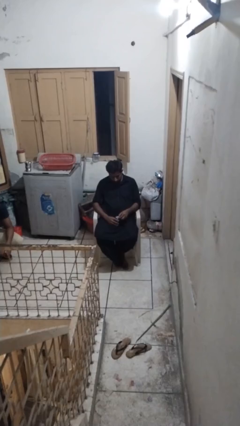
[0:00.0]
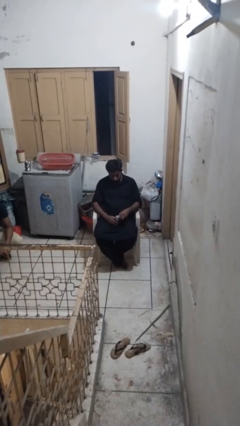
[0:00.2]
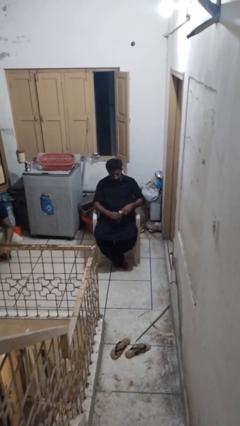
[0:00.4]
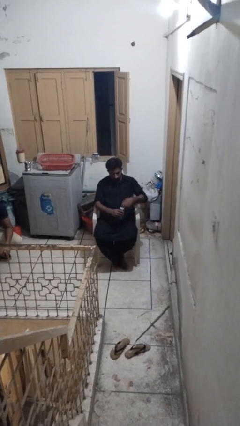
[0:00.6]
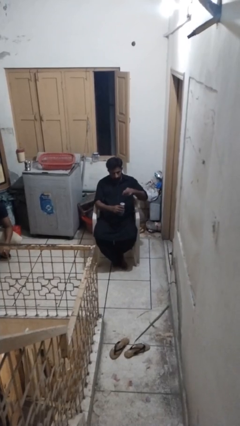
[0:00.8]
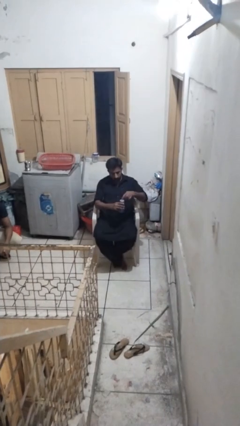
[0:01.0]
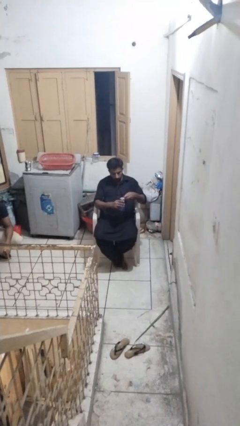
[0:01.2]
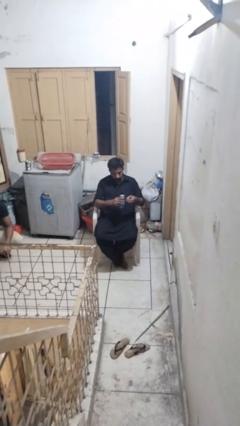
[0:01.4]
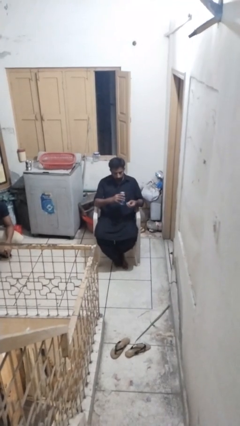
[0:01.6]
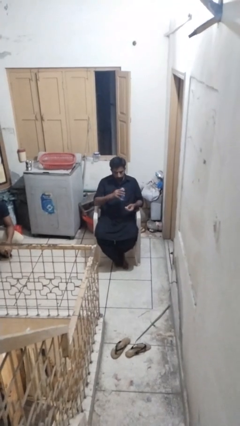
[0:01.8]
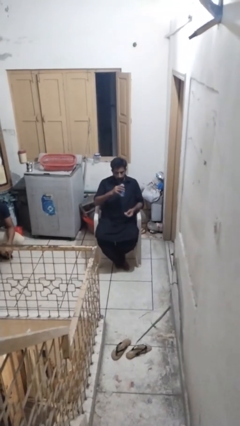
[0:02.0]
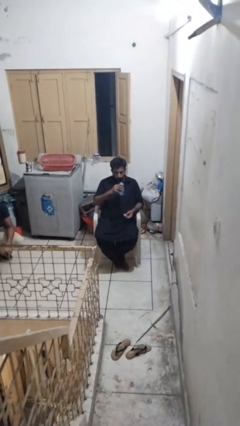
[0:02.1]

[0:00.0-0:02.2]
person opens beverage can

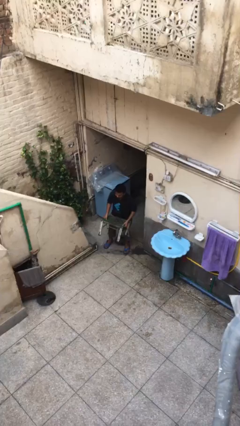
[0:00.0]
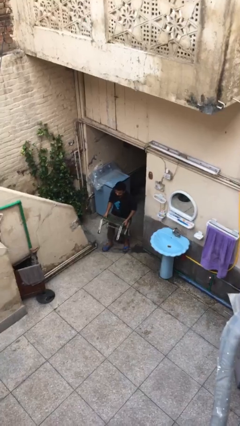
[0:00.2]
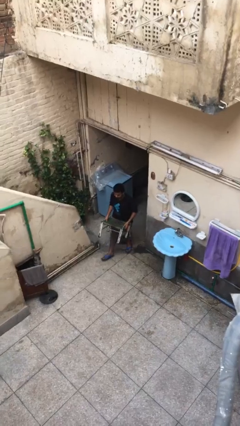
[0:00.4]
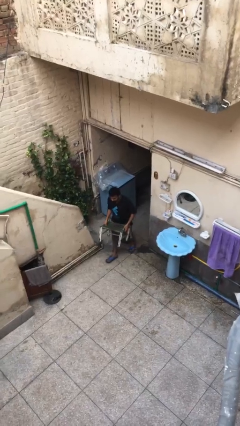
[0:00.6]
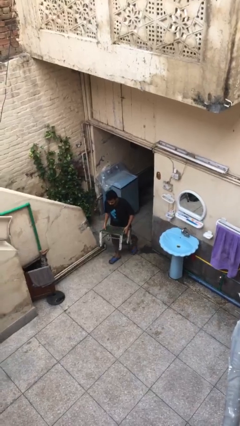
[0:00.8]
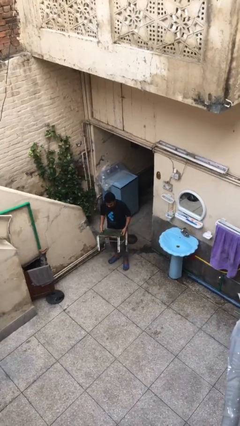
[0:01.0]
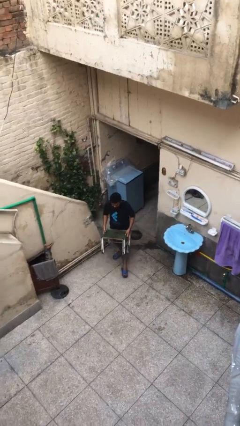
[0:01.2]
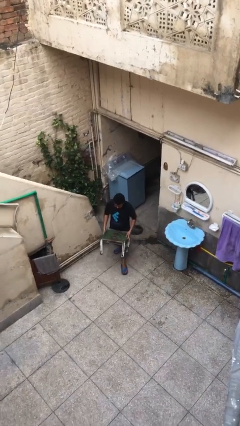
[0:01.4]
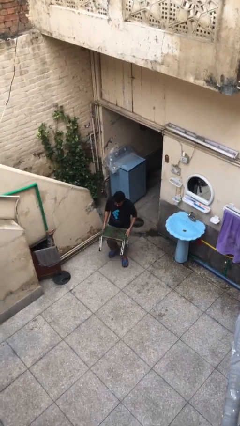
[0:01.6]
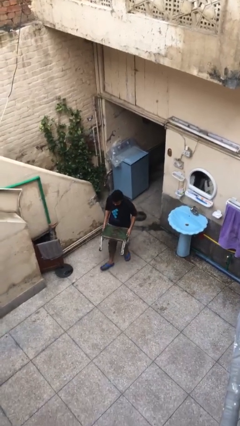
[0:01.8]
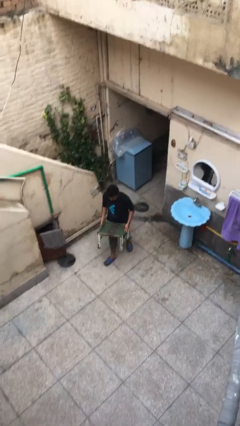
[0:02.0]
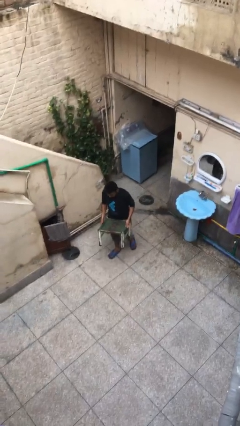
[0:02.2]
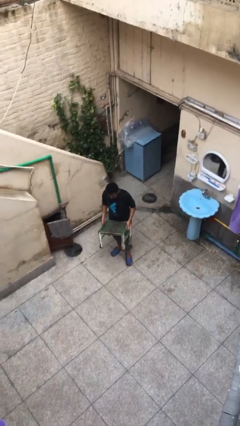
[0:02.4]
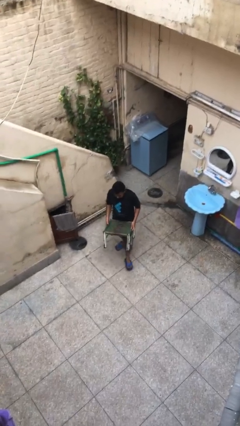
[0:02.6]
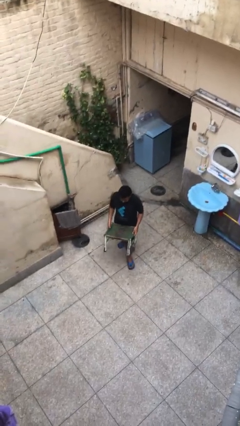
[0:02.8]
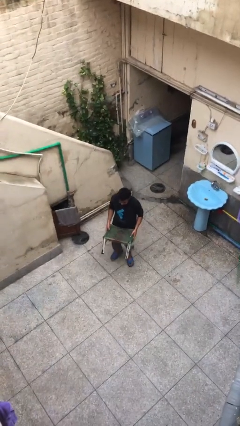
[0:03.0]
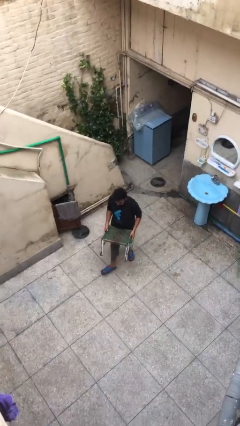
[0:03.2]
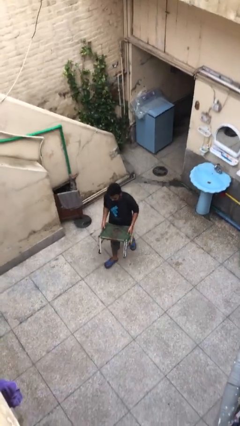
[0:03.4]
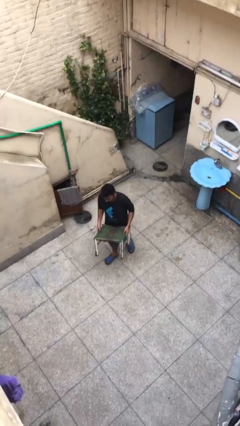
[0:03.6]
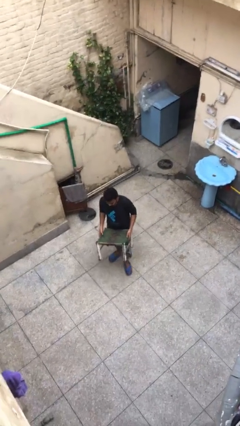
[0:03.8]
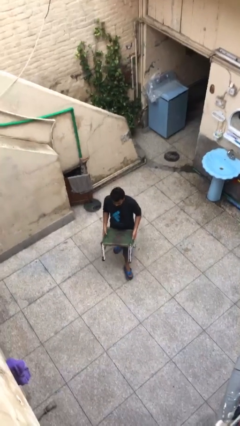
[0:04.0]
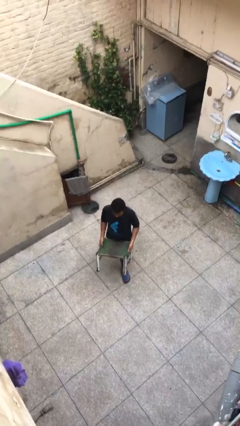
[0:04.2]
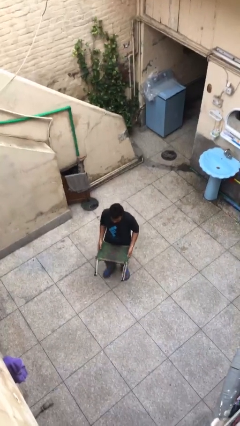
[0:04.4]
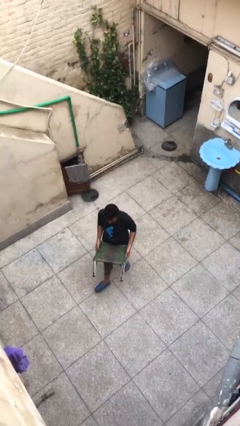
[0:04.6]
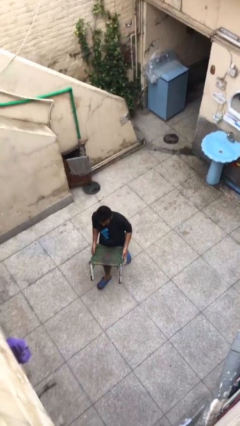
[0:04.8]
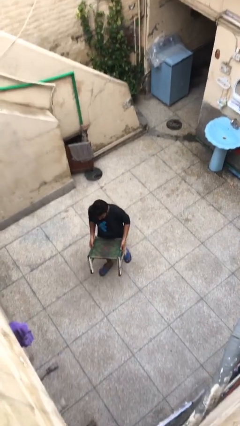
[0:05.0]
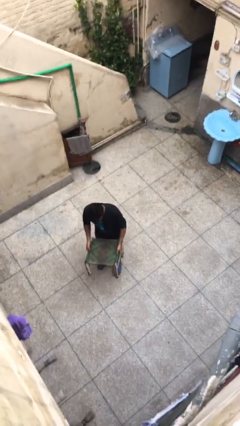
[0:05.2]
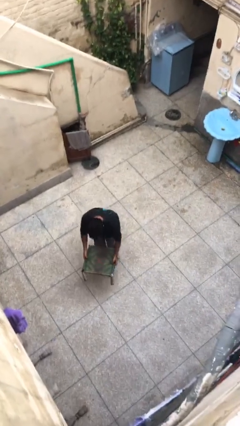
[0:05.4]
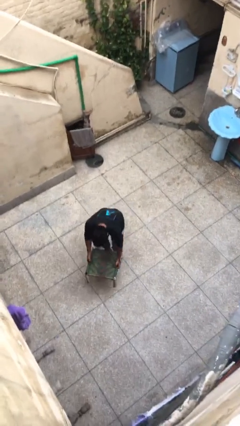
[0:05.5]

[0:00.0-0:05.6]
person carries heavy object

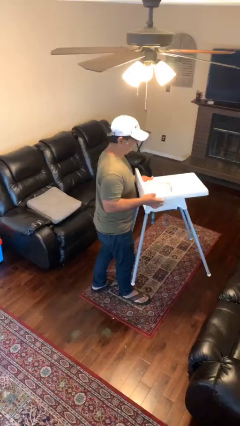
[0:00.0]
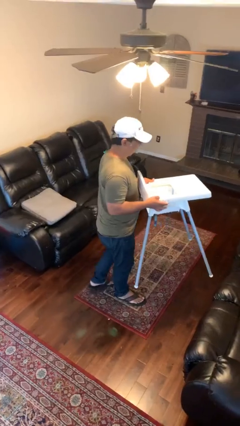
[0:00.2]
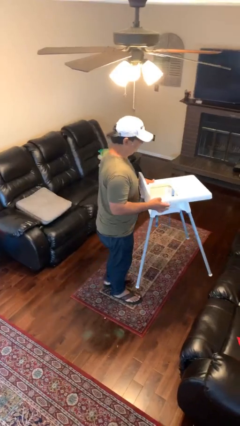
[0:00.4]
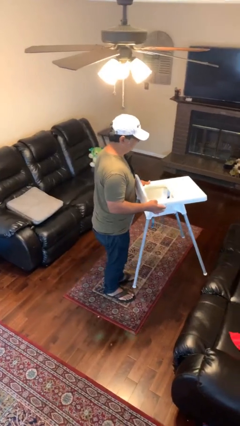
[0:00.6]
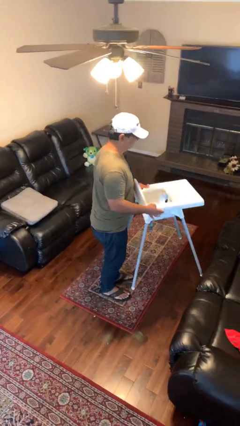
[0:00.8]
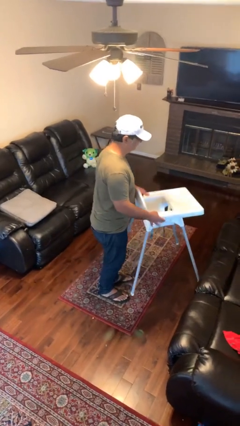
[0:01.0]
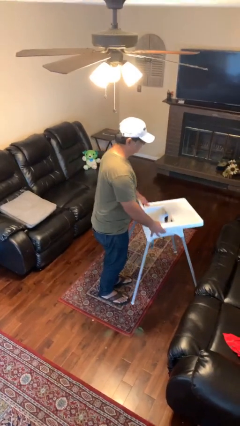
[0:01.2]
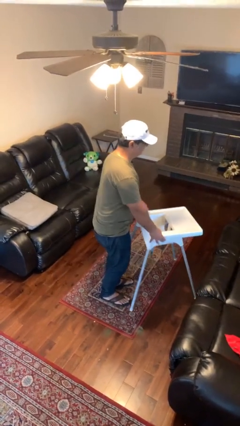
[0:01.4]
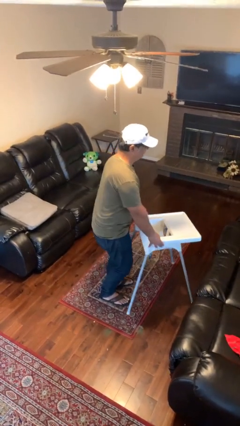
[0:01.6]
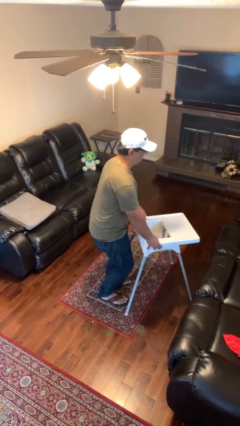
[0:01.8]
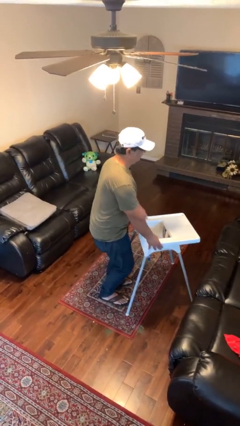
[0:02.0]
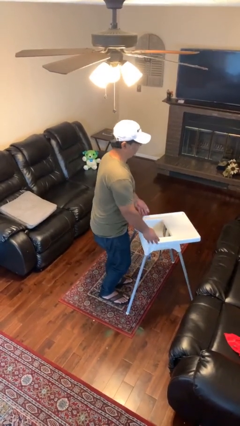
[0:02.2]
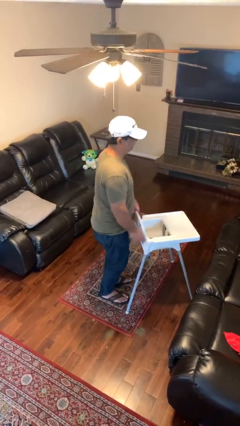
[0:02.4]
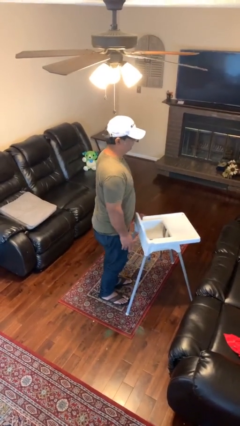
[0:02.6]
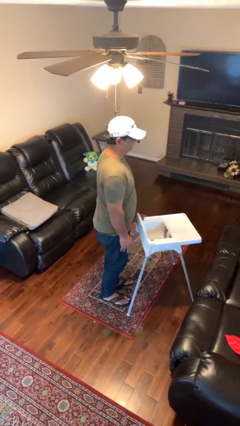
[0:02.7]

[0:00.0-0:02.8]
person puts down object on floor

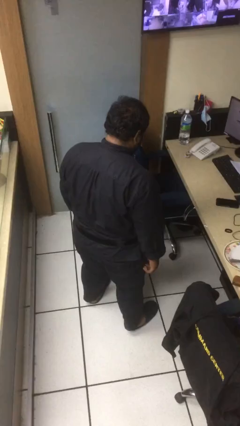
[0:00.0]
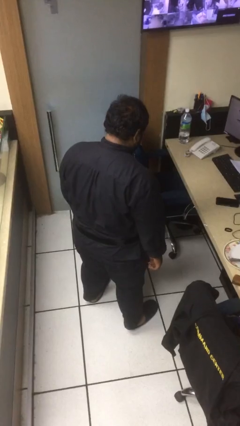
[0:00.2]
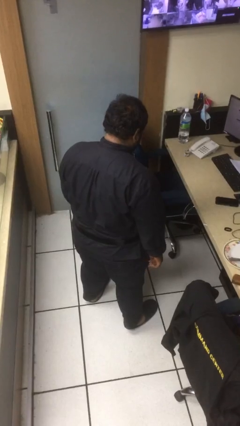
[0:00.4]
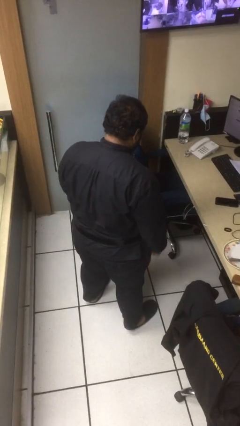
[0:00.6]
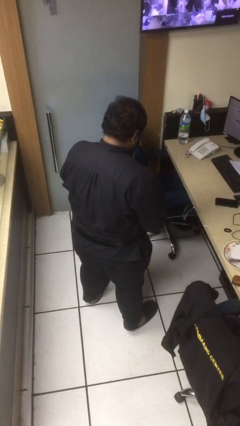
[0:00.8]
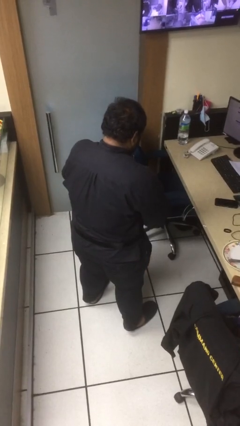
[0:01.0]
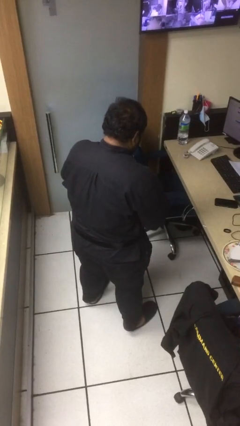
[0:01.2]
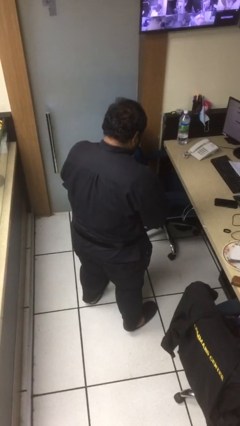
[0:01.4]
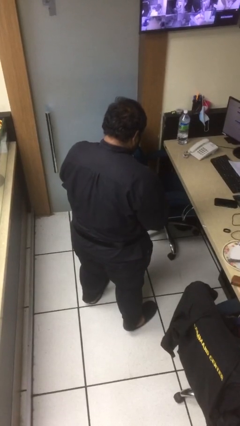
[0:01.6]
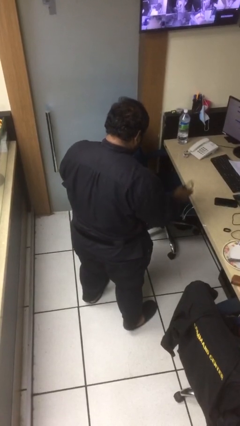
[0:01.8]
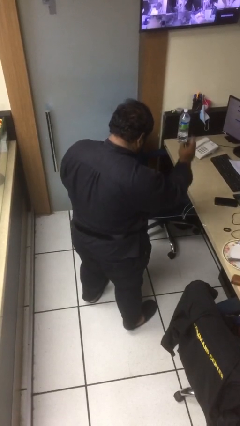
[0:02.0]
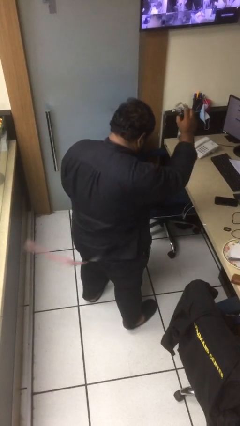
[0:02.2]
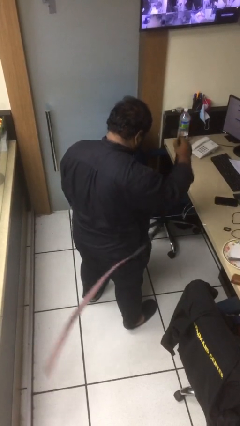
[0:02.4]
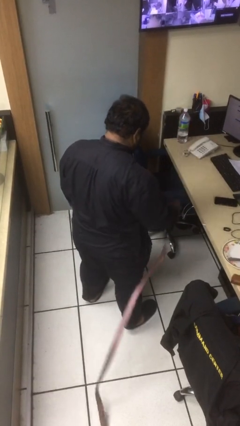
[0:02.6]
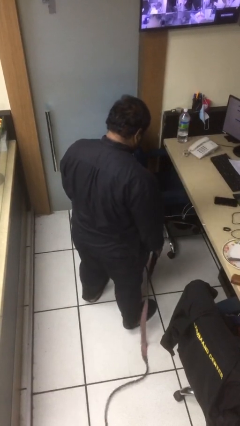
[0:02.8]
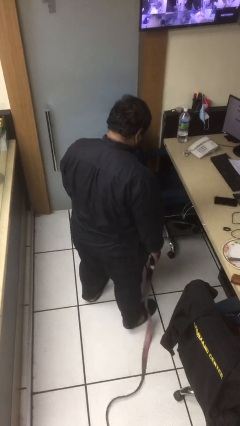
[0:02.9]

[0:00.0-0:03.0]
person takes off belt

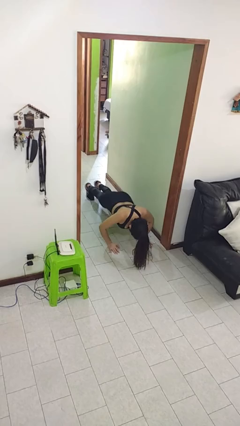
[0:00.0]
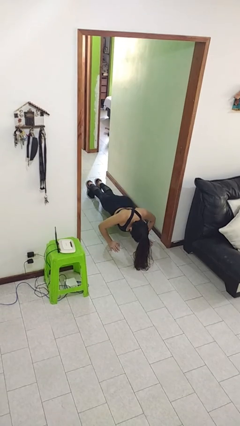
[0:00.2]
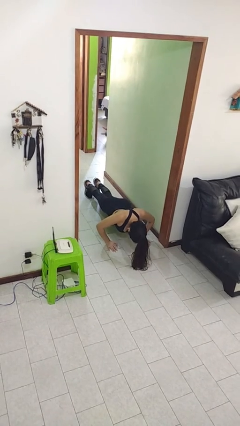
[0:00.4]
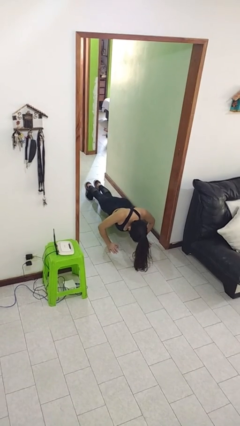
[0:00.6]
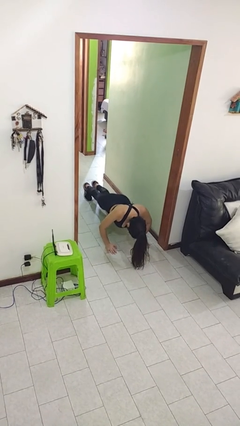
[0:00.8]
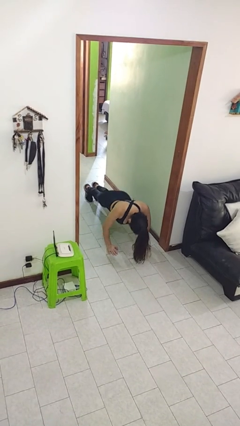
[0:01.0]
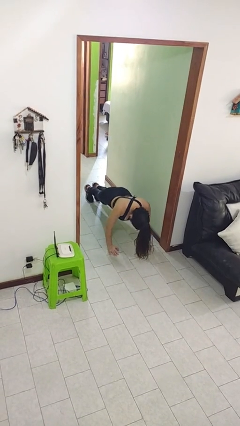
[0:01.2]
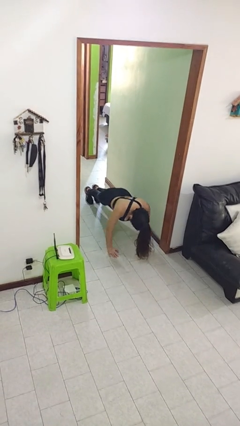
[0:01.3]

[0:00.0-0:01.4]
person exercises with pushup

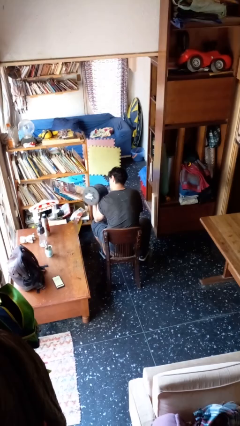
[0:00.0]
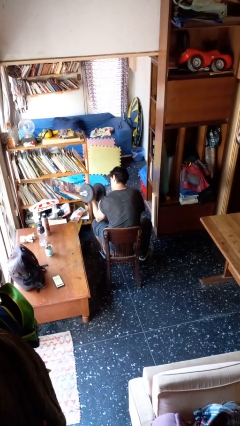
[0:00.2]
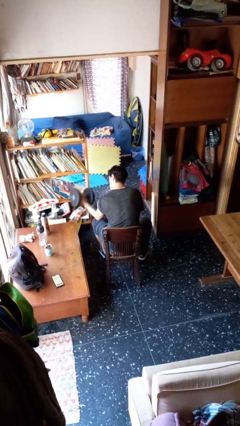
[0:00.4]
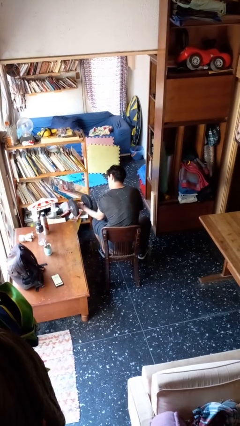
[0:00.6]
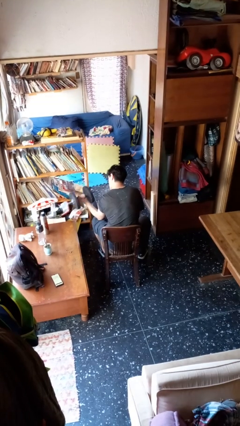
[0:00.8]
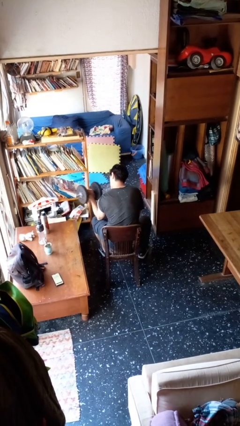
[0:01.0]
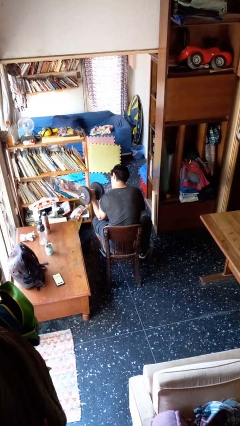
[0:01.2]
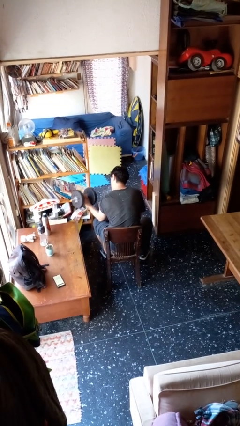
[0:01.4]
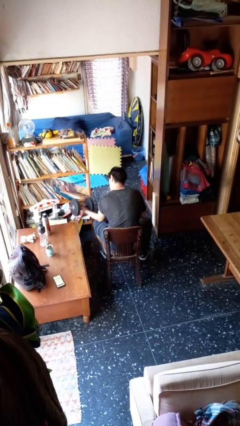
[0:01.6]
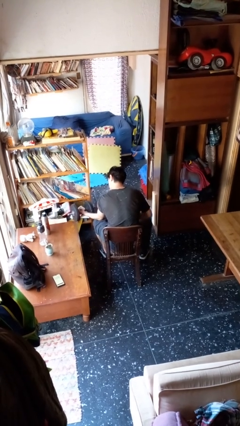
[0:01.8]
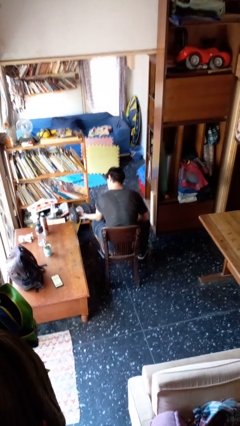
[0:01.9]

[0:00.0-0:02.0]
person lifts dumbbells

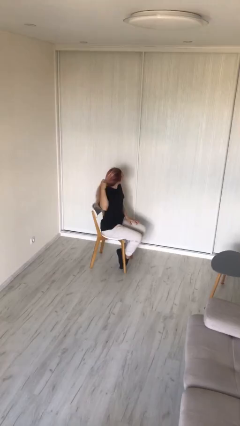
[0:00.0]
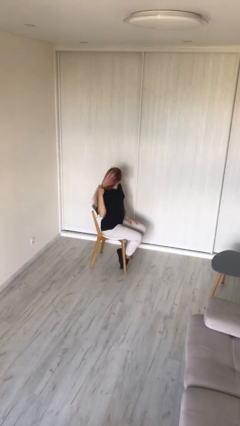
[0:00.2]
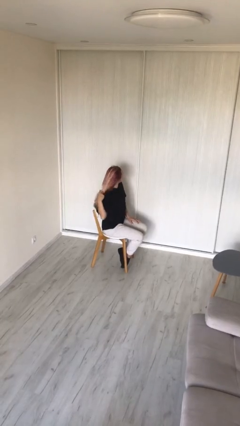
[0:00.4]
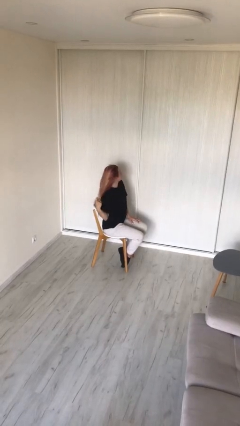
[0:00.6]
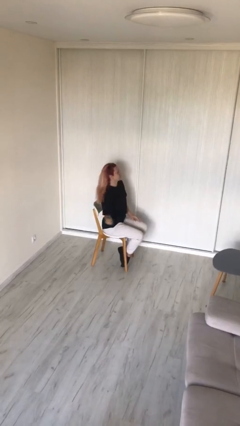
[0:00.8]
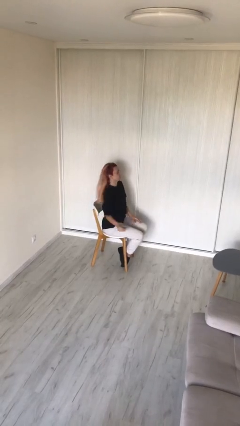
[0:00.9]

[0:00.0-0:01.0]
person takes off hairtie
